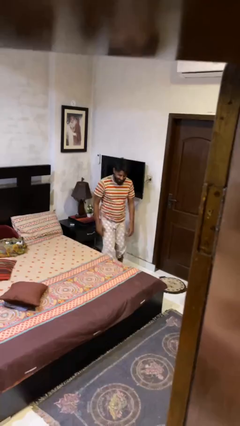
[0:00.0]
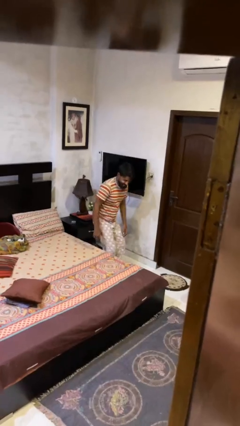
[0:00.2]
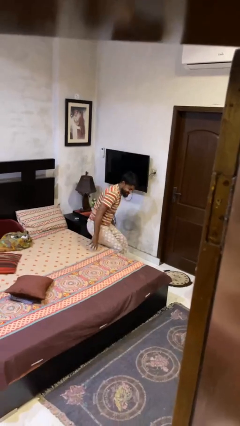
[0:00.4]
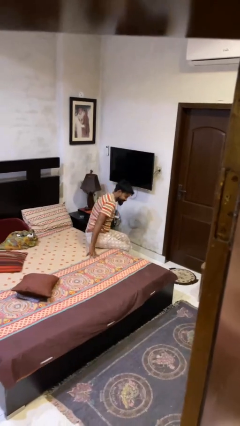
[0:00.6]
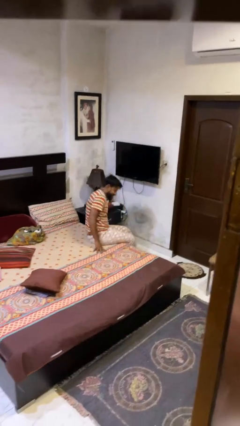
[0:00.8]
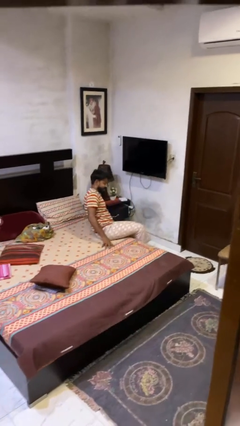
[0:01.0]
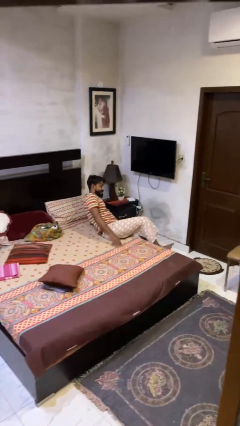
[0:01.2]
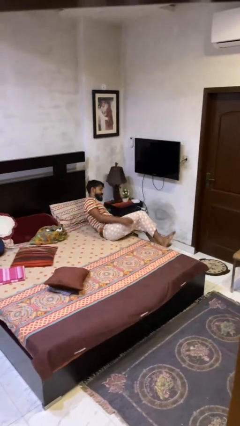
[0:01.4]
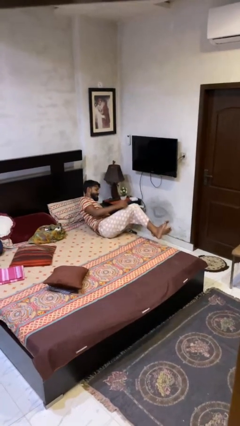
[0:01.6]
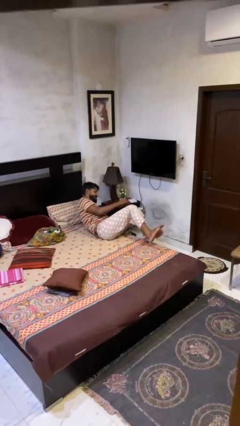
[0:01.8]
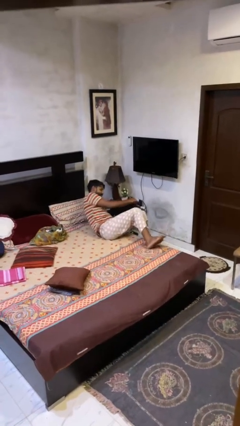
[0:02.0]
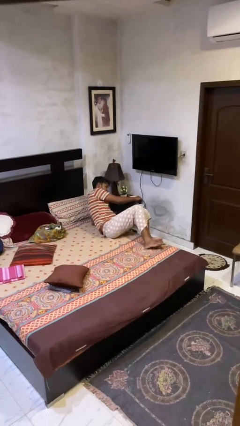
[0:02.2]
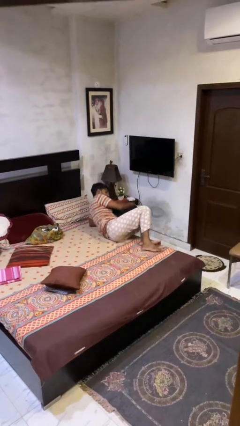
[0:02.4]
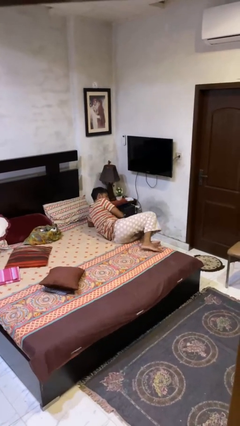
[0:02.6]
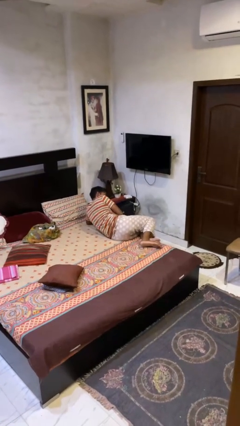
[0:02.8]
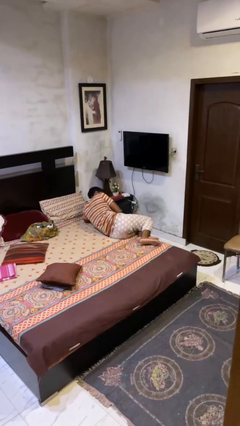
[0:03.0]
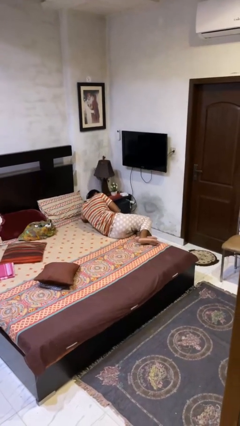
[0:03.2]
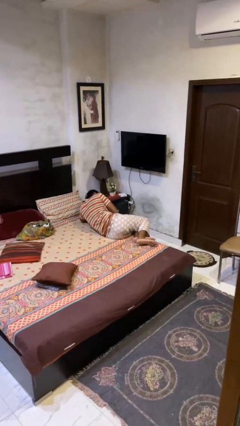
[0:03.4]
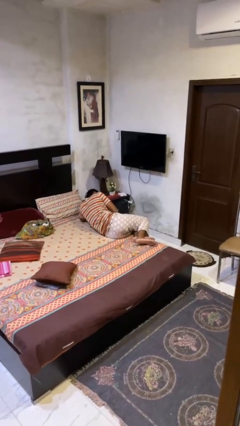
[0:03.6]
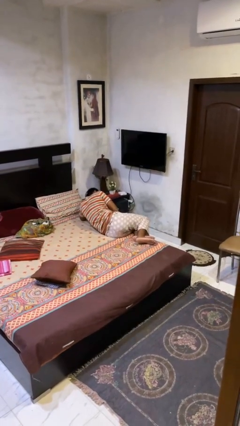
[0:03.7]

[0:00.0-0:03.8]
person lies down on bed

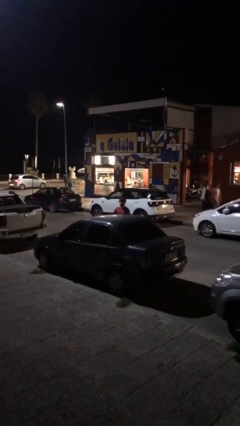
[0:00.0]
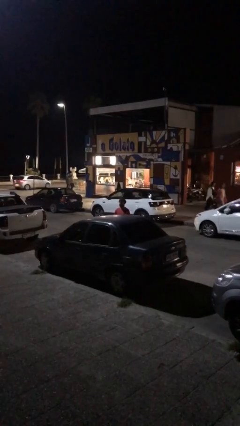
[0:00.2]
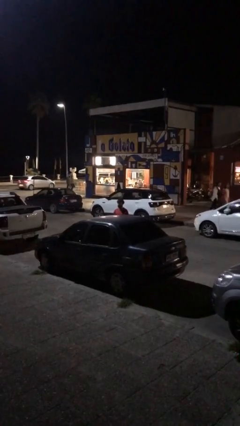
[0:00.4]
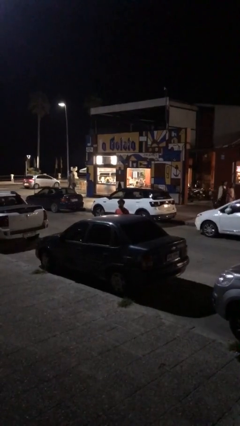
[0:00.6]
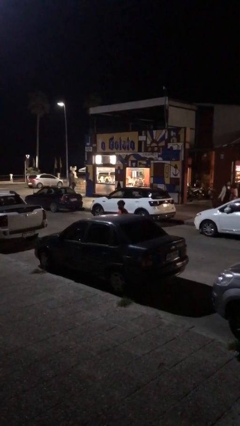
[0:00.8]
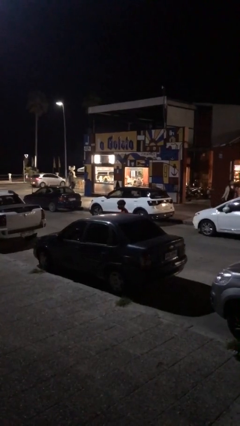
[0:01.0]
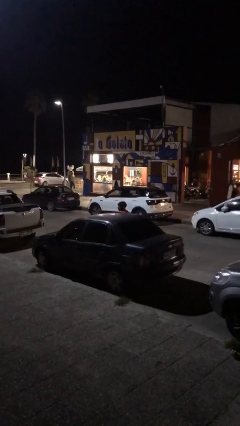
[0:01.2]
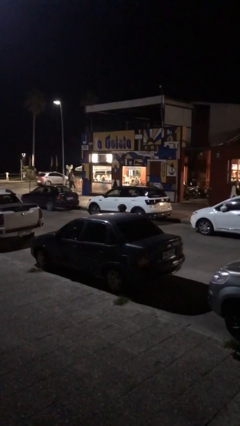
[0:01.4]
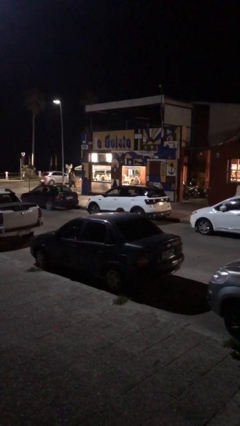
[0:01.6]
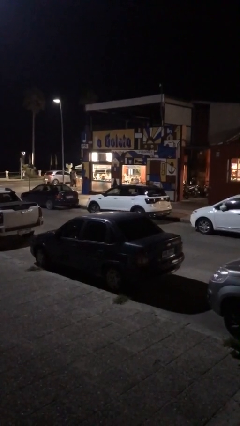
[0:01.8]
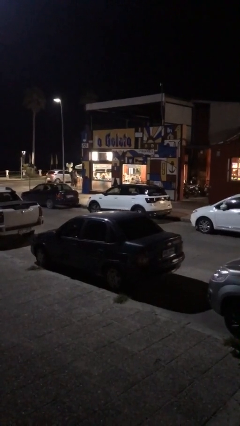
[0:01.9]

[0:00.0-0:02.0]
person enters car

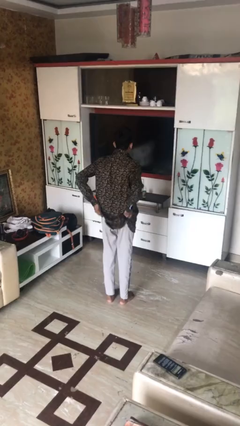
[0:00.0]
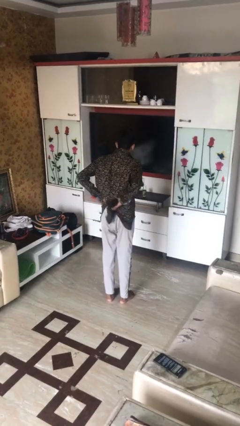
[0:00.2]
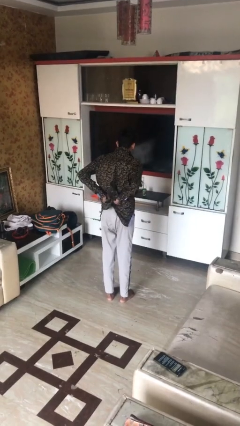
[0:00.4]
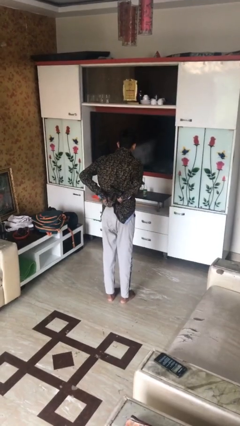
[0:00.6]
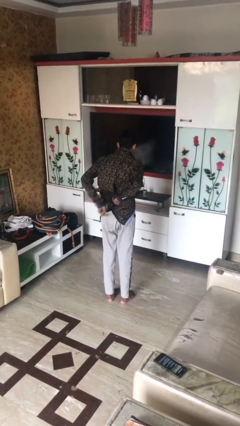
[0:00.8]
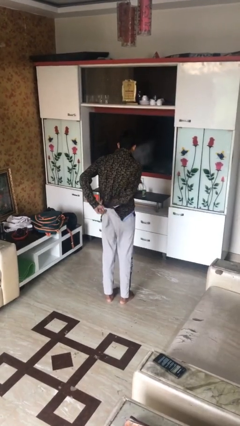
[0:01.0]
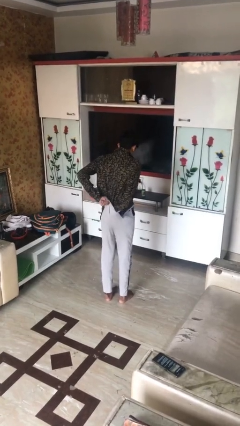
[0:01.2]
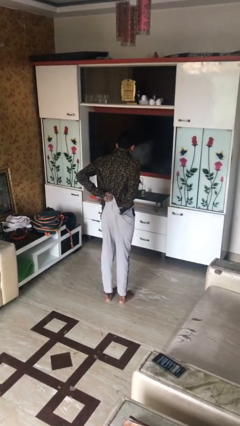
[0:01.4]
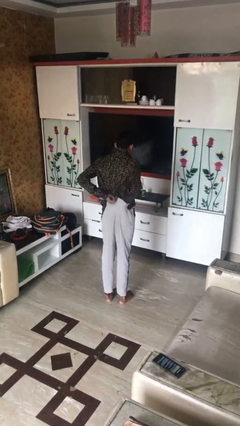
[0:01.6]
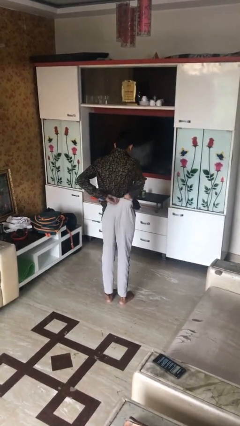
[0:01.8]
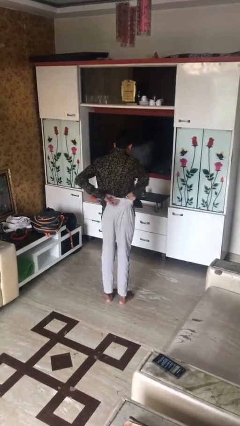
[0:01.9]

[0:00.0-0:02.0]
person tucks in shirt

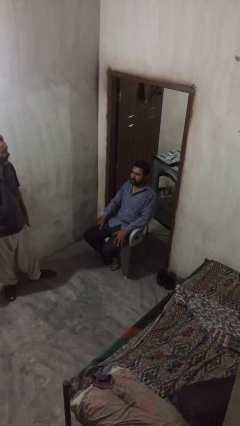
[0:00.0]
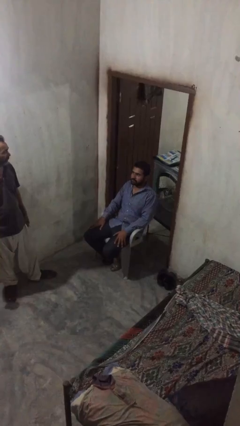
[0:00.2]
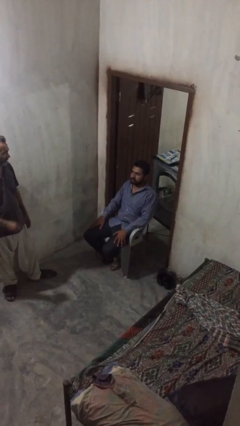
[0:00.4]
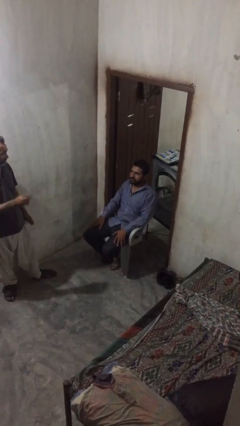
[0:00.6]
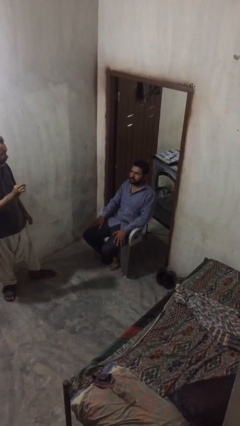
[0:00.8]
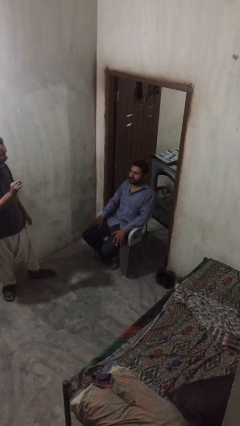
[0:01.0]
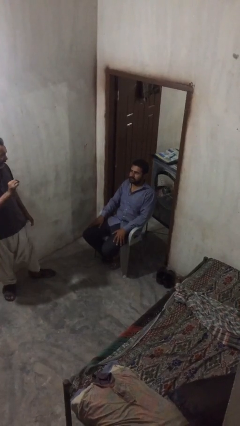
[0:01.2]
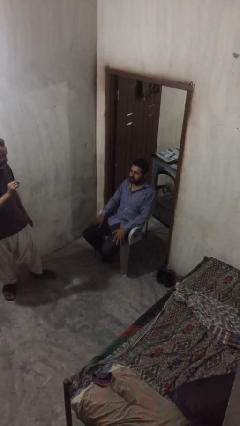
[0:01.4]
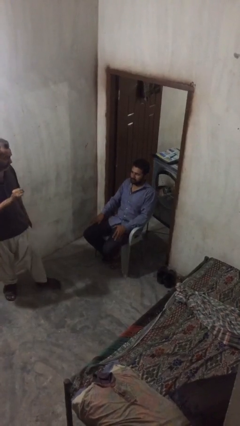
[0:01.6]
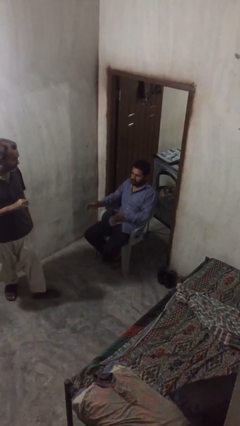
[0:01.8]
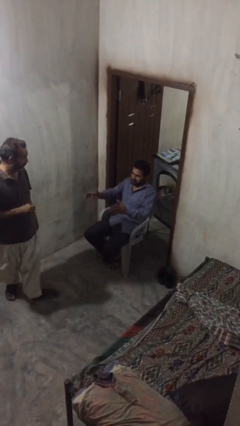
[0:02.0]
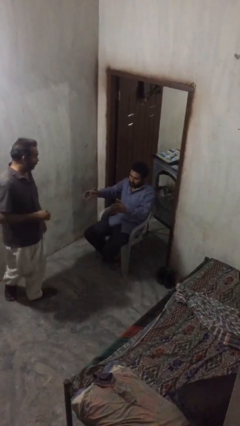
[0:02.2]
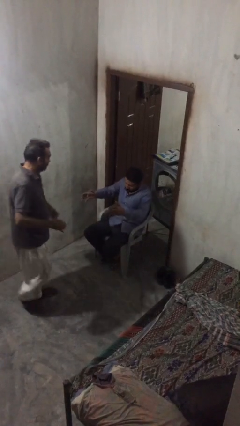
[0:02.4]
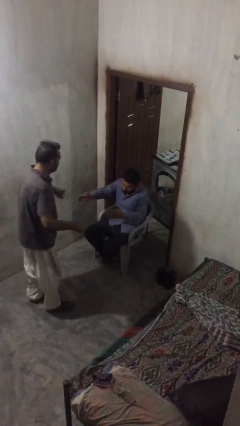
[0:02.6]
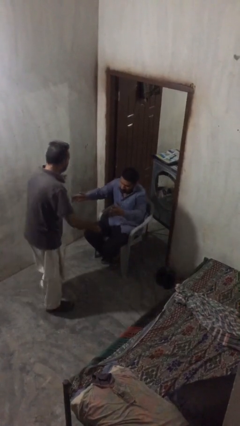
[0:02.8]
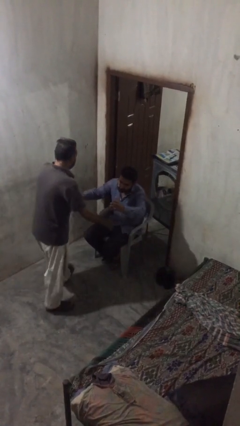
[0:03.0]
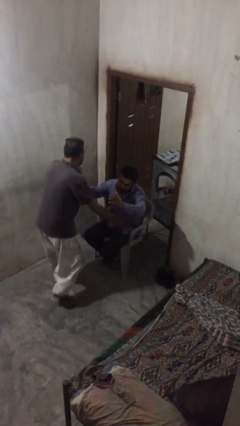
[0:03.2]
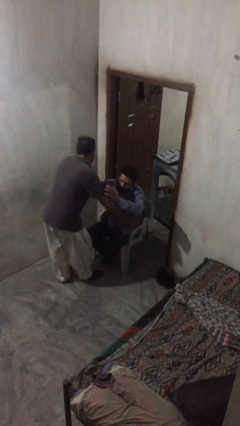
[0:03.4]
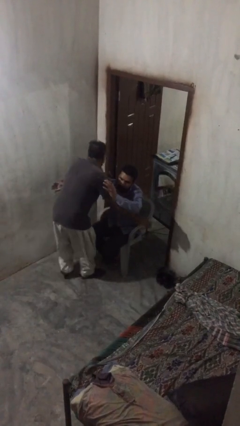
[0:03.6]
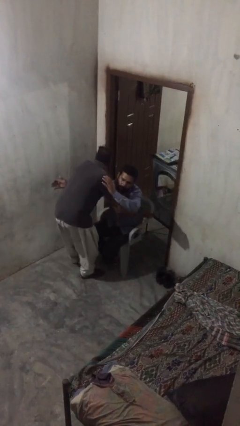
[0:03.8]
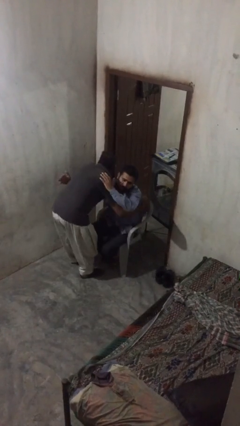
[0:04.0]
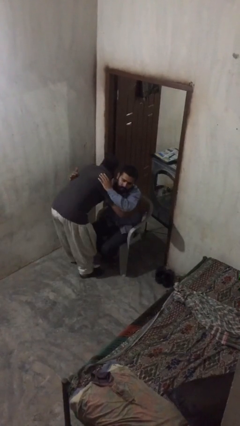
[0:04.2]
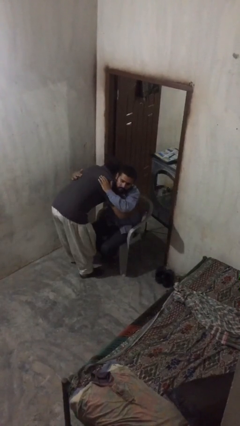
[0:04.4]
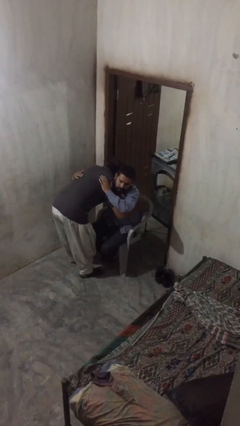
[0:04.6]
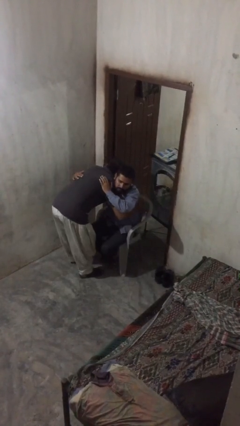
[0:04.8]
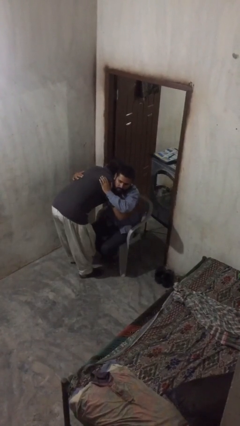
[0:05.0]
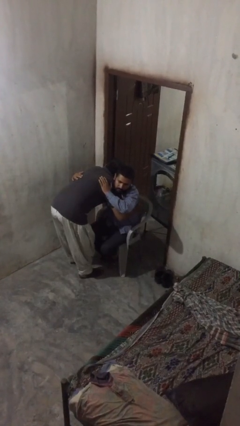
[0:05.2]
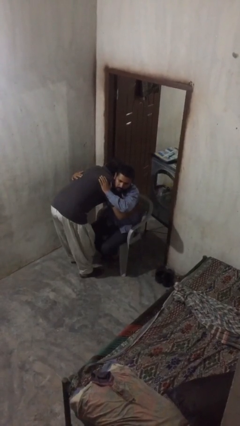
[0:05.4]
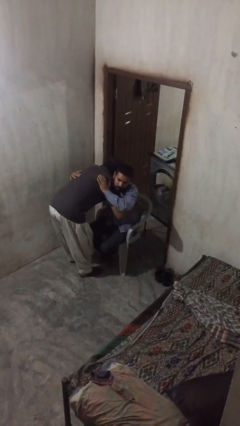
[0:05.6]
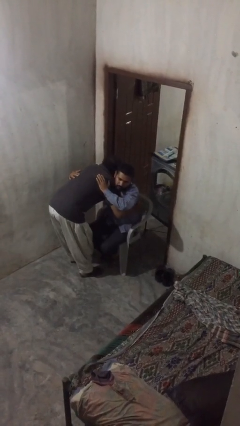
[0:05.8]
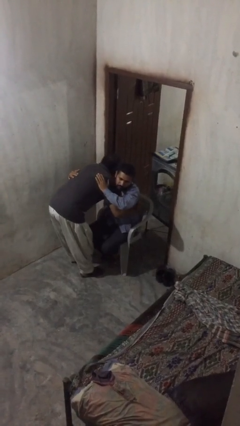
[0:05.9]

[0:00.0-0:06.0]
person embraces person

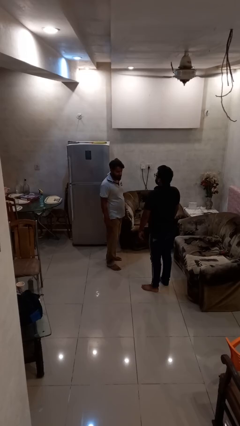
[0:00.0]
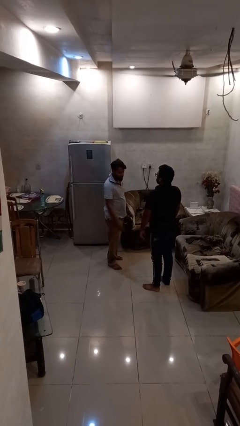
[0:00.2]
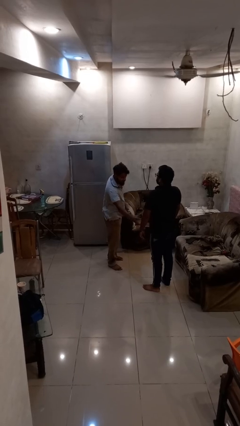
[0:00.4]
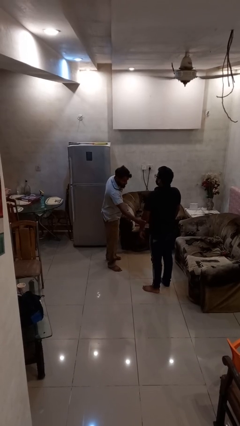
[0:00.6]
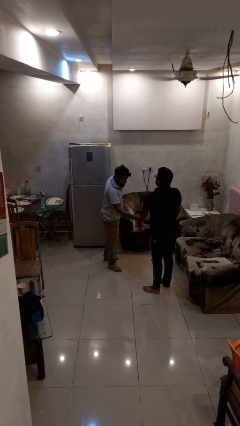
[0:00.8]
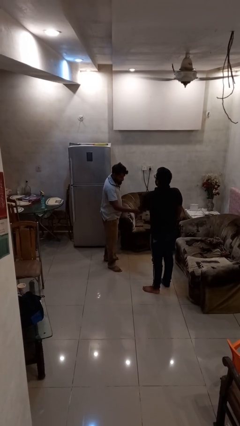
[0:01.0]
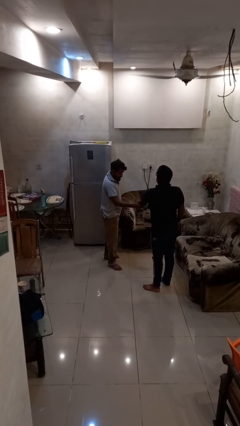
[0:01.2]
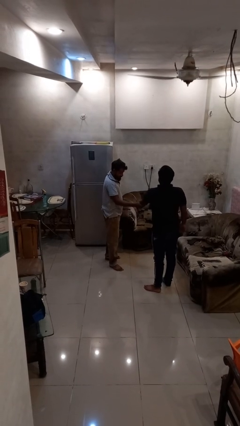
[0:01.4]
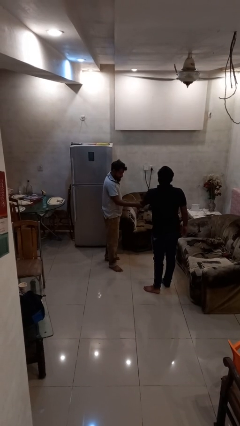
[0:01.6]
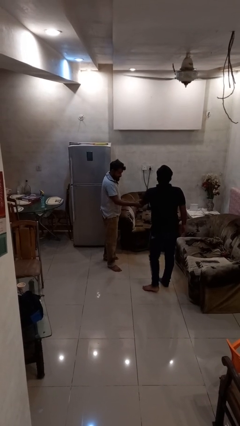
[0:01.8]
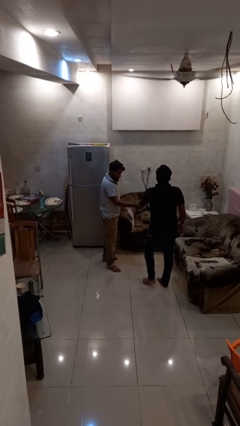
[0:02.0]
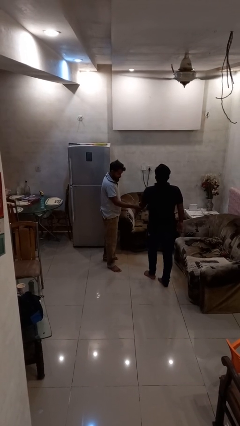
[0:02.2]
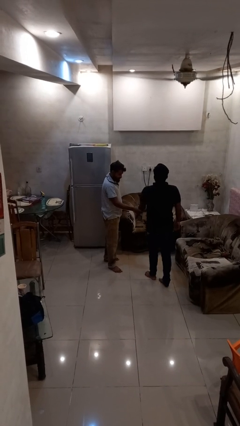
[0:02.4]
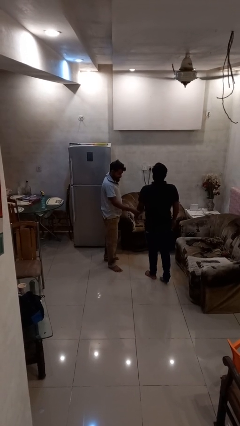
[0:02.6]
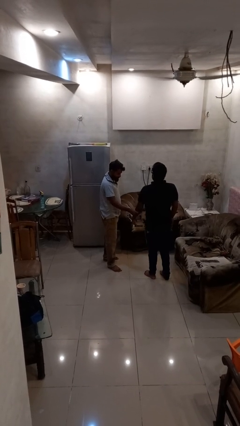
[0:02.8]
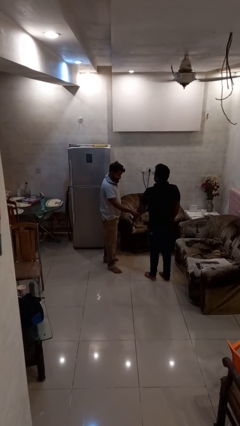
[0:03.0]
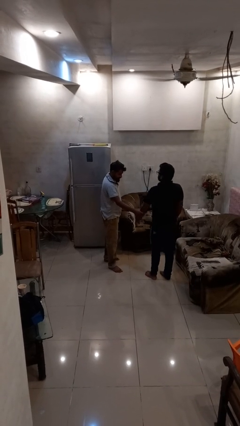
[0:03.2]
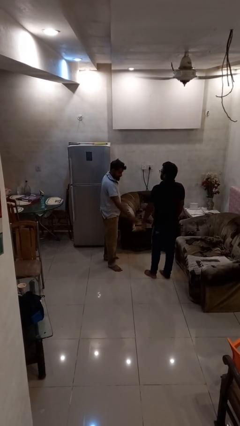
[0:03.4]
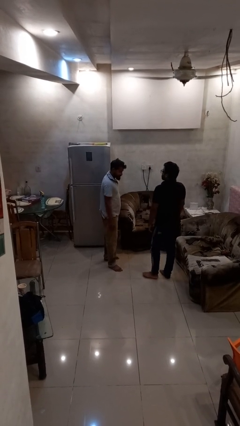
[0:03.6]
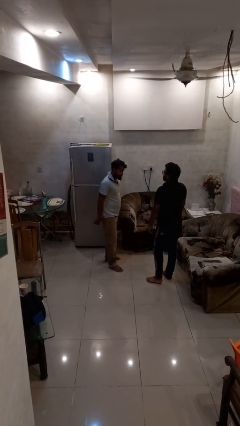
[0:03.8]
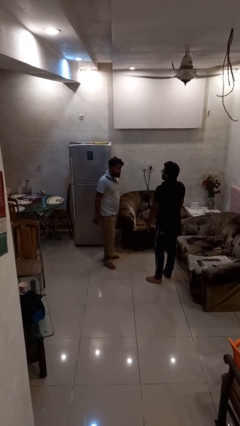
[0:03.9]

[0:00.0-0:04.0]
person grabs person by forearm
